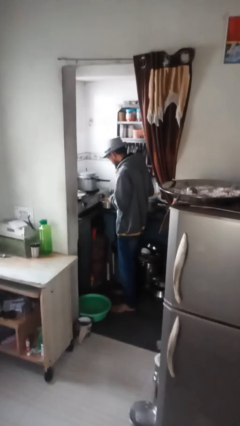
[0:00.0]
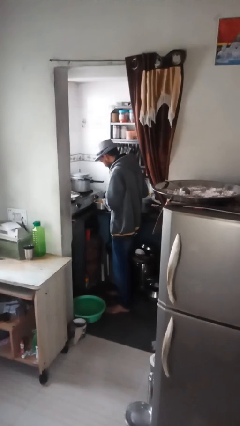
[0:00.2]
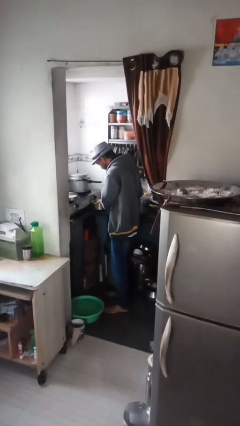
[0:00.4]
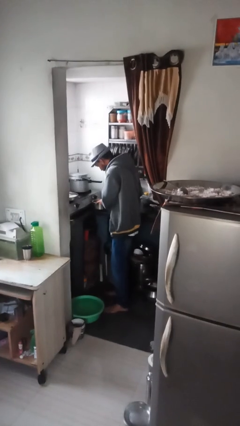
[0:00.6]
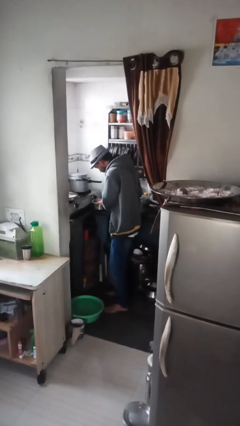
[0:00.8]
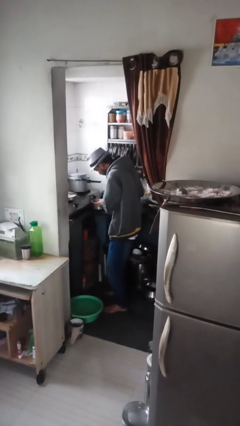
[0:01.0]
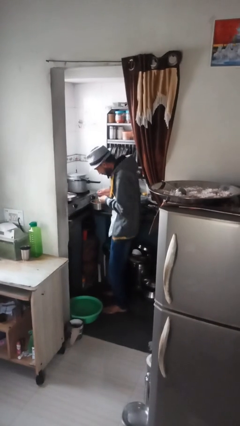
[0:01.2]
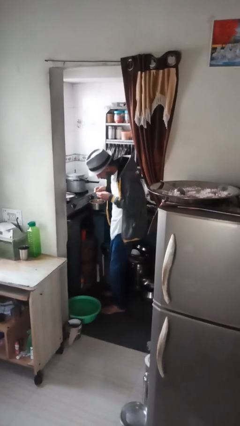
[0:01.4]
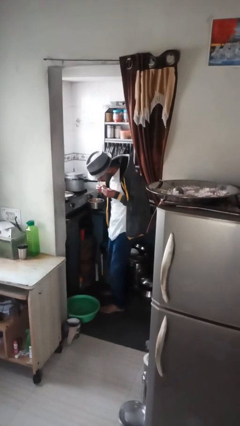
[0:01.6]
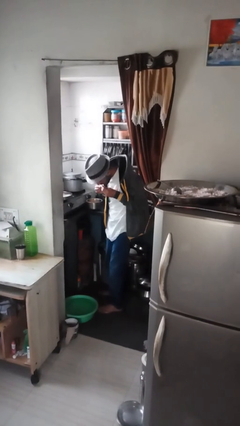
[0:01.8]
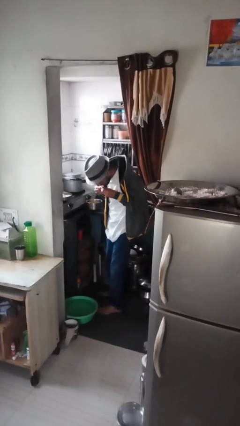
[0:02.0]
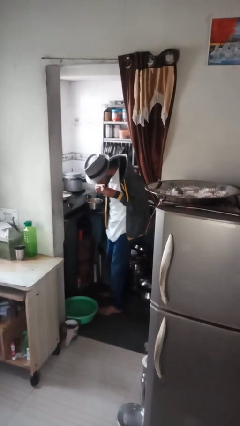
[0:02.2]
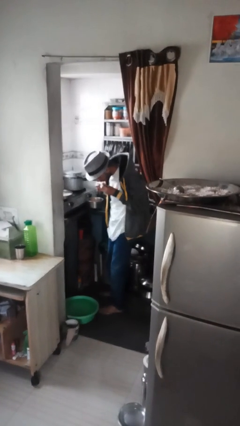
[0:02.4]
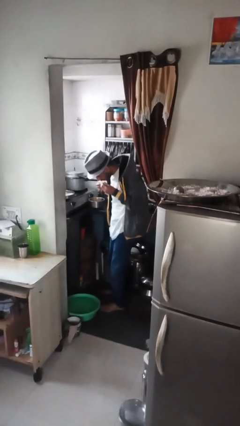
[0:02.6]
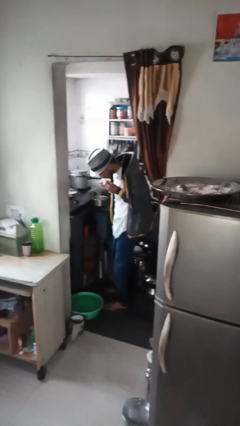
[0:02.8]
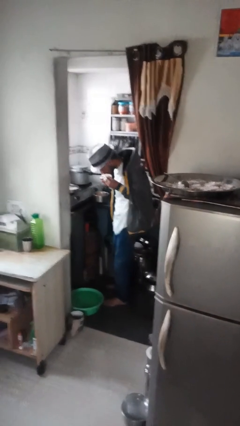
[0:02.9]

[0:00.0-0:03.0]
person burns hand

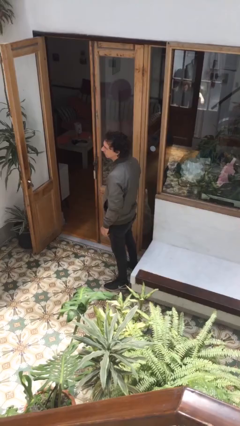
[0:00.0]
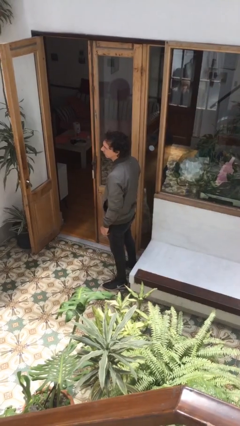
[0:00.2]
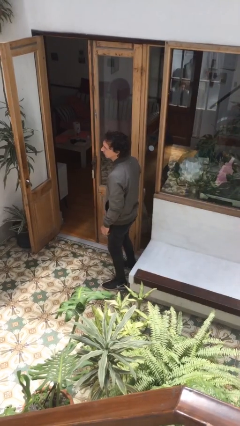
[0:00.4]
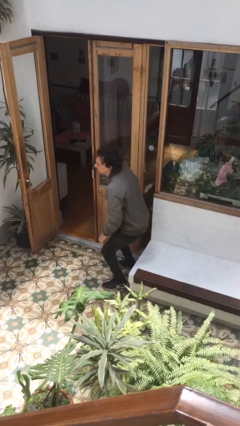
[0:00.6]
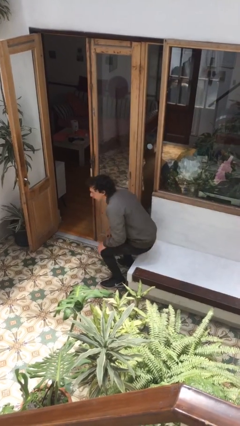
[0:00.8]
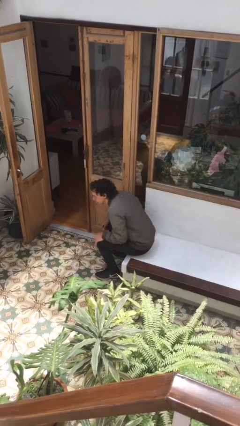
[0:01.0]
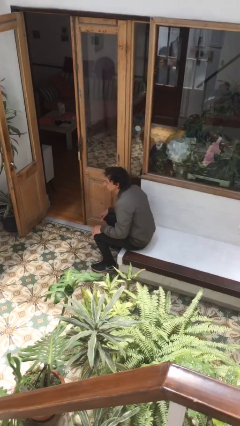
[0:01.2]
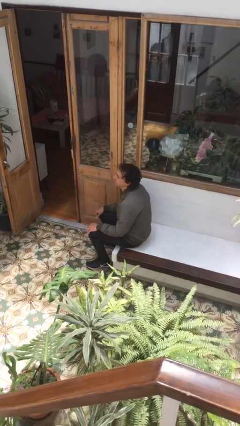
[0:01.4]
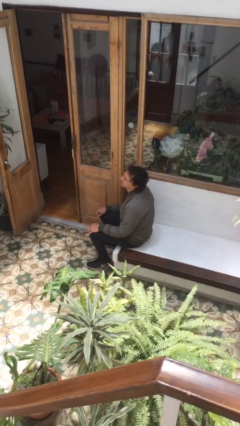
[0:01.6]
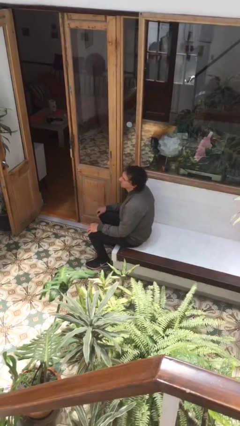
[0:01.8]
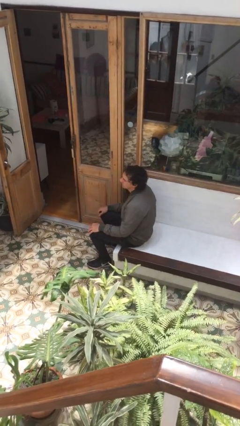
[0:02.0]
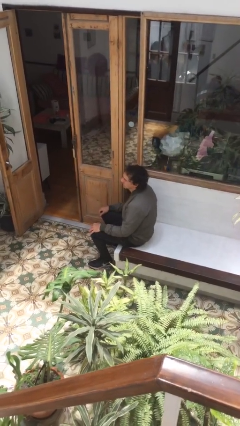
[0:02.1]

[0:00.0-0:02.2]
person sits down

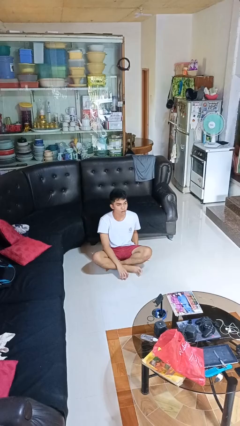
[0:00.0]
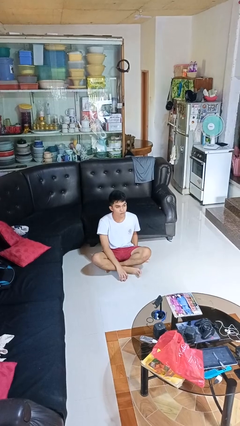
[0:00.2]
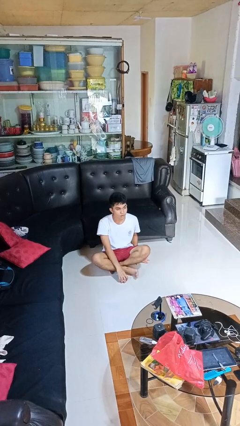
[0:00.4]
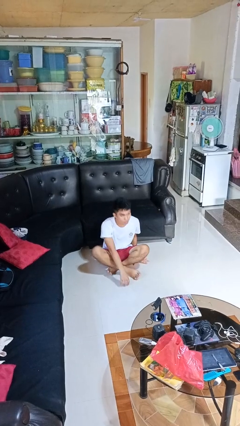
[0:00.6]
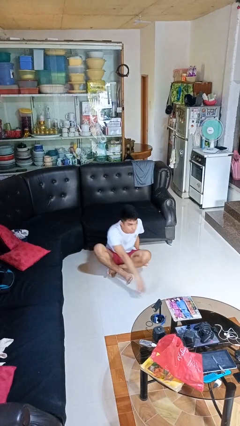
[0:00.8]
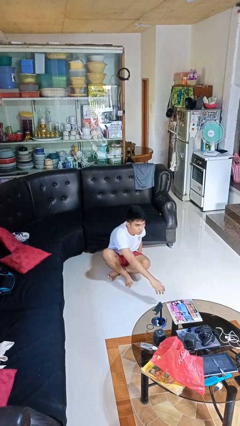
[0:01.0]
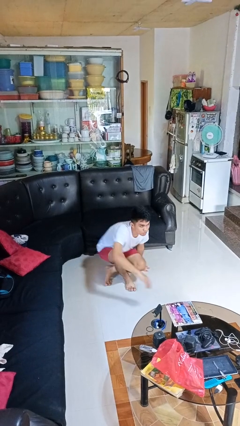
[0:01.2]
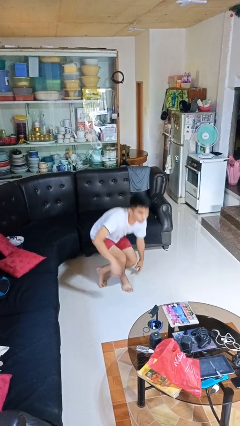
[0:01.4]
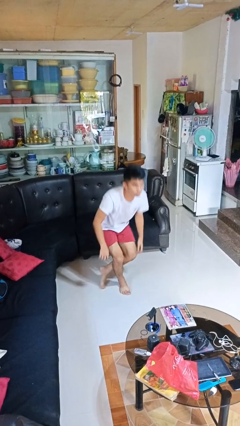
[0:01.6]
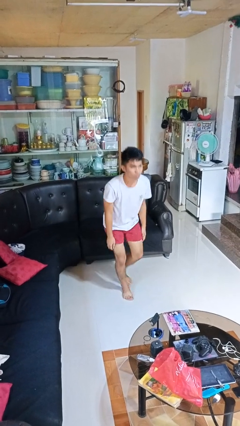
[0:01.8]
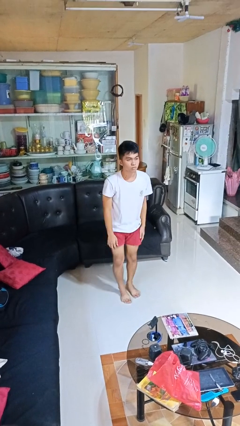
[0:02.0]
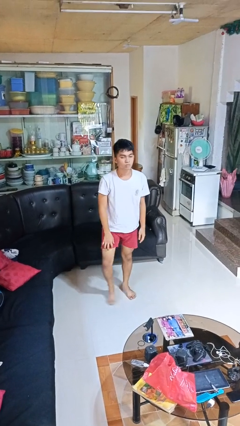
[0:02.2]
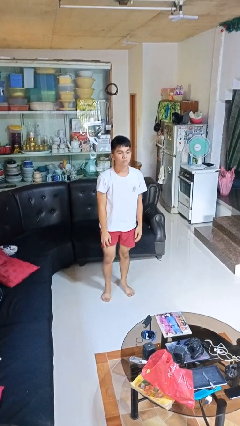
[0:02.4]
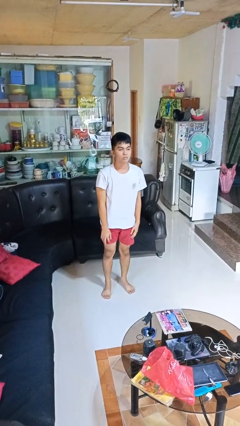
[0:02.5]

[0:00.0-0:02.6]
person stands up from floor

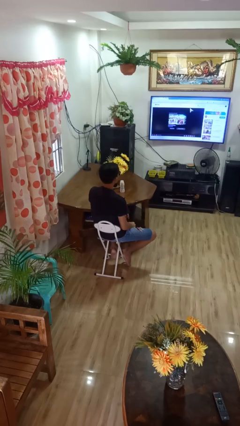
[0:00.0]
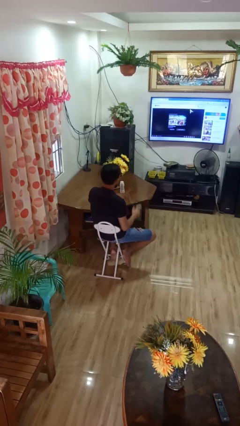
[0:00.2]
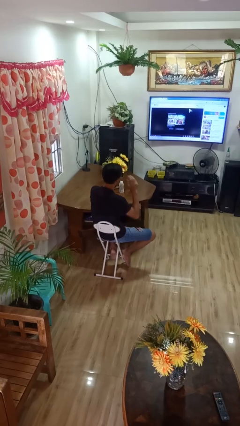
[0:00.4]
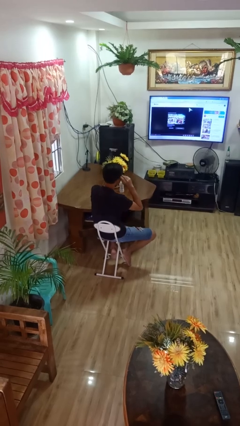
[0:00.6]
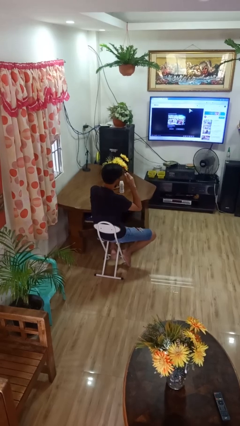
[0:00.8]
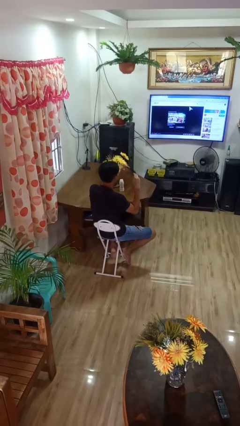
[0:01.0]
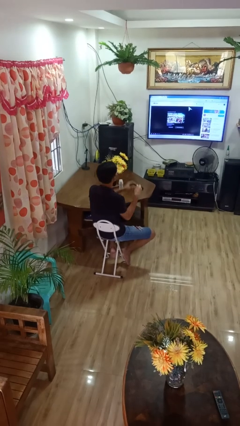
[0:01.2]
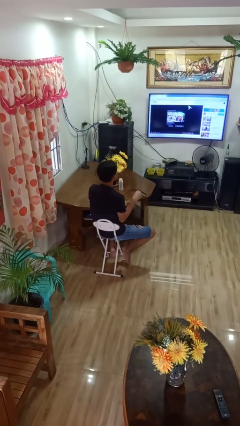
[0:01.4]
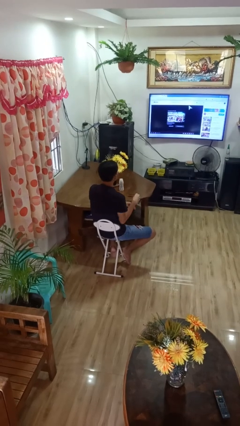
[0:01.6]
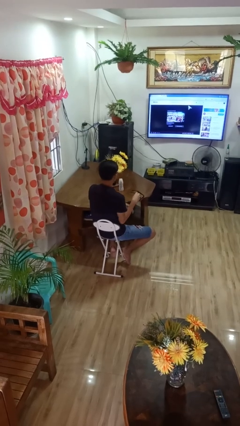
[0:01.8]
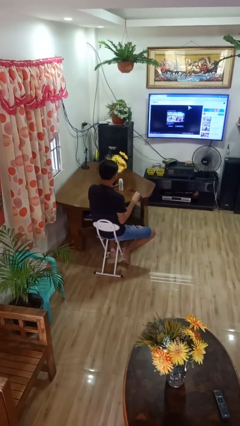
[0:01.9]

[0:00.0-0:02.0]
person takes off sunglasses

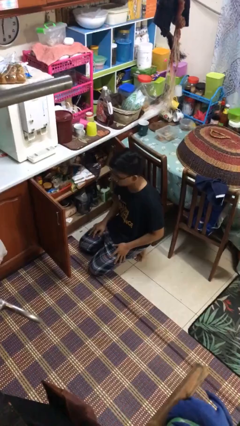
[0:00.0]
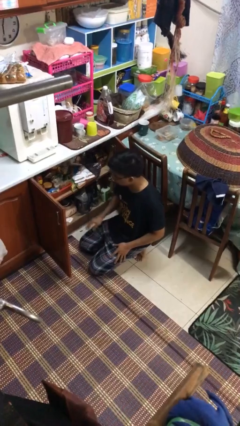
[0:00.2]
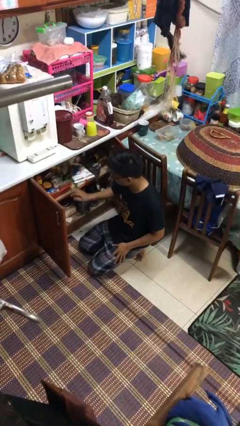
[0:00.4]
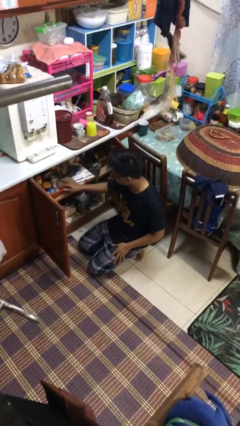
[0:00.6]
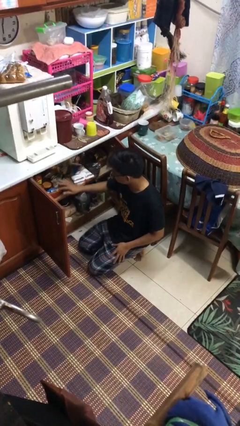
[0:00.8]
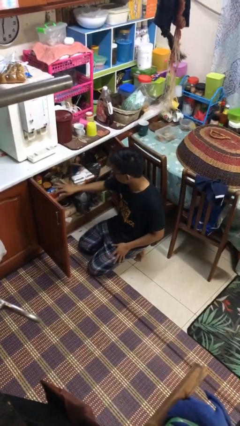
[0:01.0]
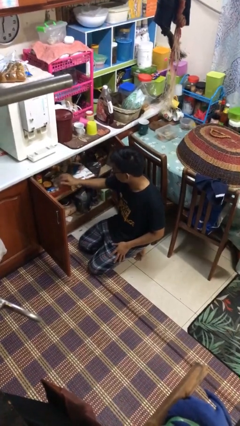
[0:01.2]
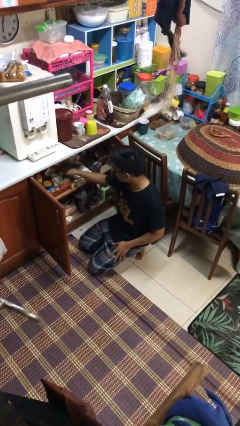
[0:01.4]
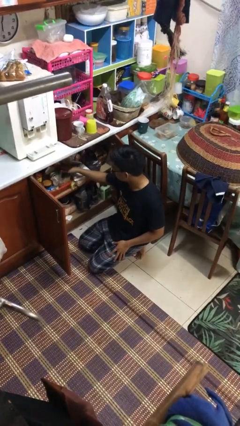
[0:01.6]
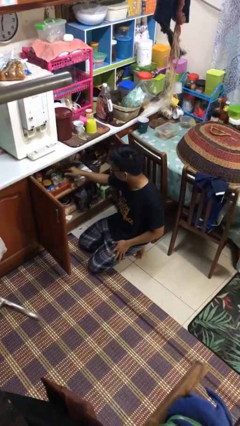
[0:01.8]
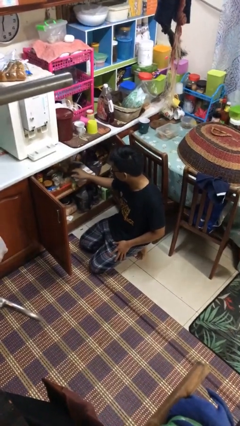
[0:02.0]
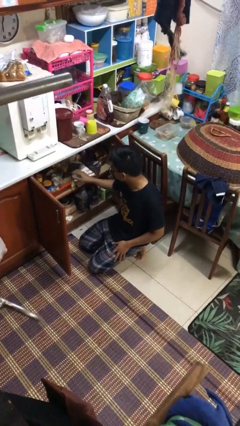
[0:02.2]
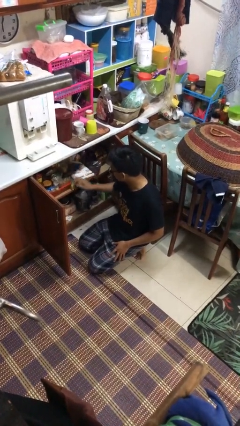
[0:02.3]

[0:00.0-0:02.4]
person searches in kitchen drawer

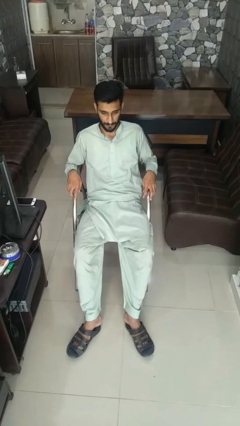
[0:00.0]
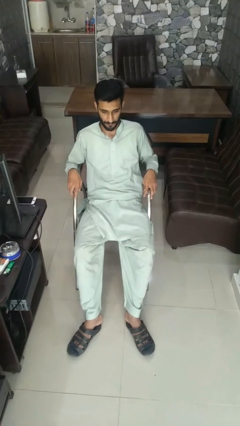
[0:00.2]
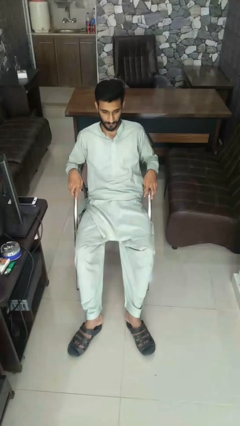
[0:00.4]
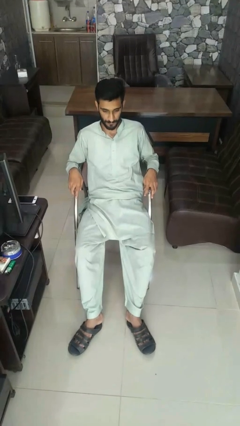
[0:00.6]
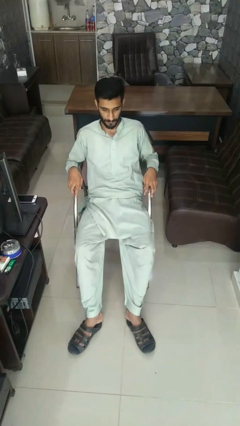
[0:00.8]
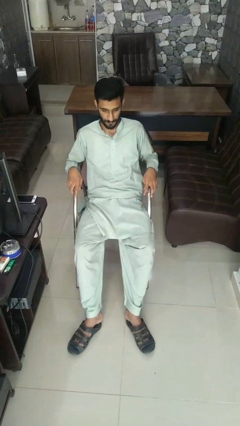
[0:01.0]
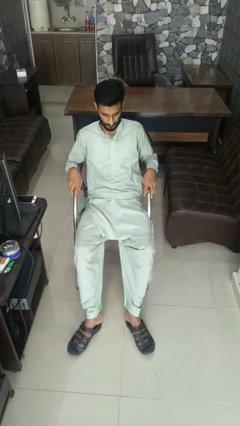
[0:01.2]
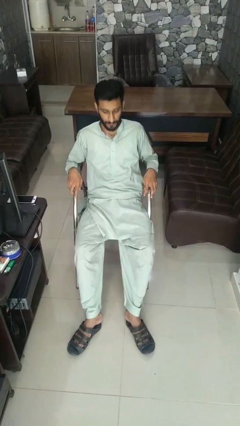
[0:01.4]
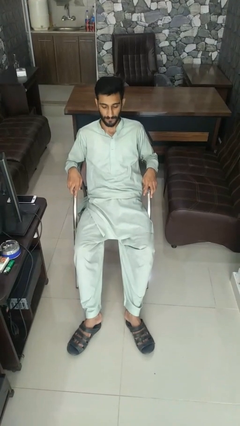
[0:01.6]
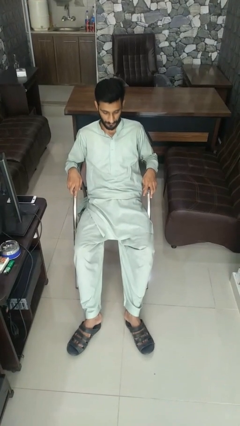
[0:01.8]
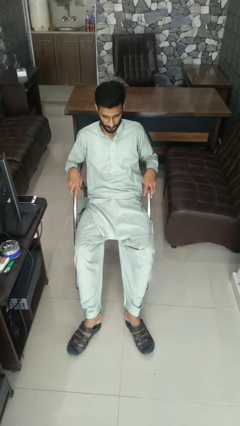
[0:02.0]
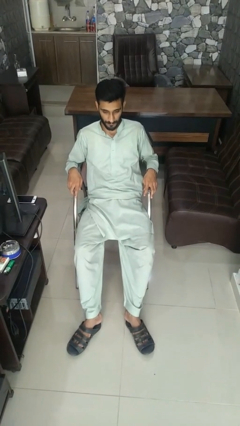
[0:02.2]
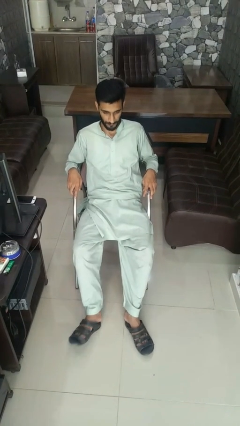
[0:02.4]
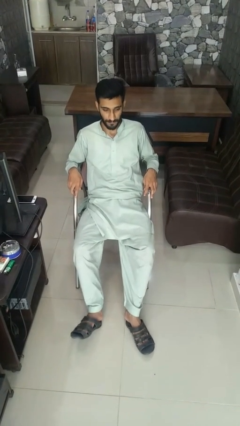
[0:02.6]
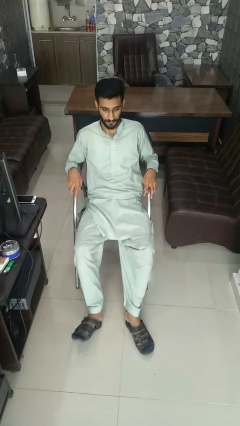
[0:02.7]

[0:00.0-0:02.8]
person nods head

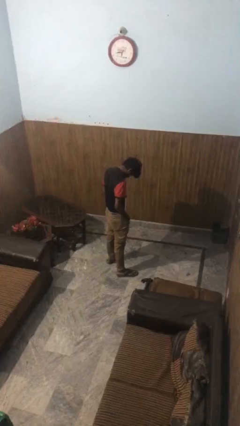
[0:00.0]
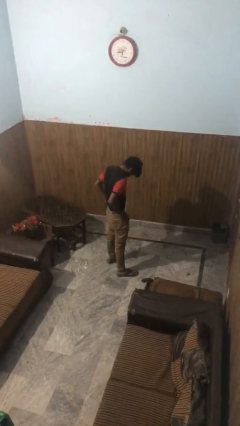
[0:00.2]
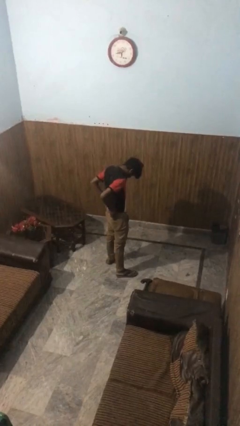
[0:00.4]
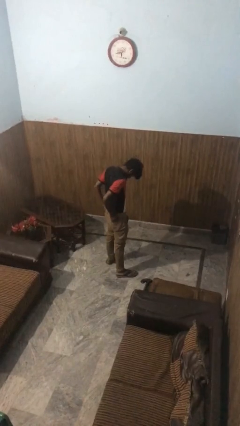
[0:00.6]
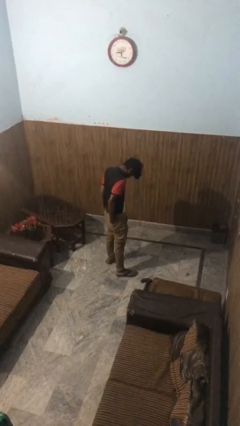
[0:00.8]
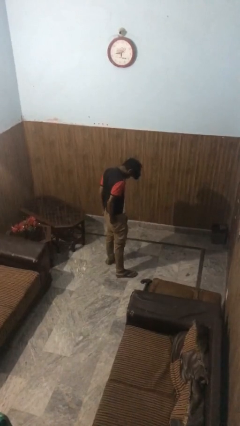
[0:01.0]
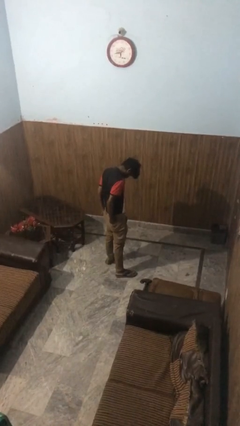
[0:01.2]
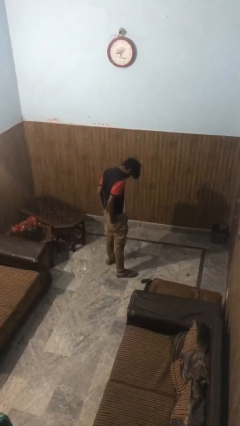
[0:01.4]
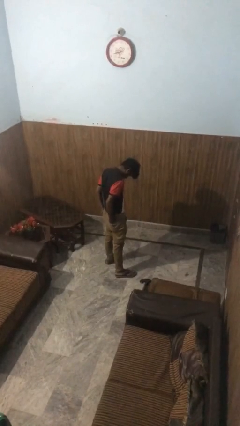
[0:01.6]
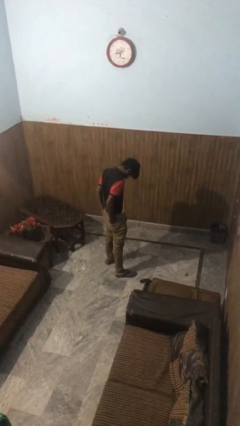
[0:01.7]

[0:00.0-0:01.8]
person puts hands in back pockets
